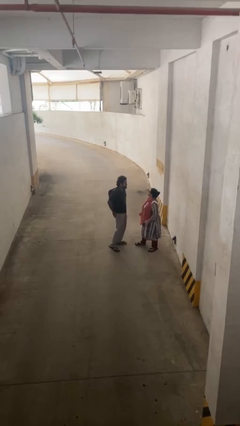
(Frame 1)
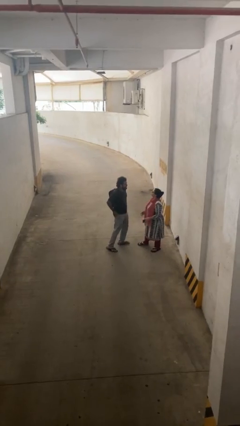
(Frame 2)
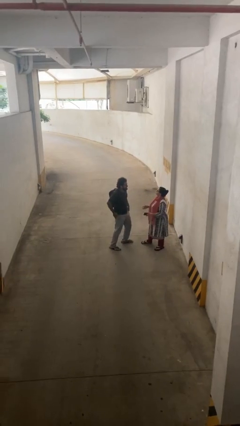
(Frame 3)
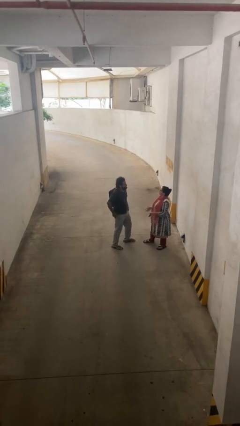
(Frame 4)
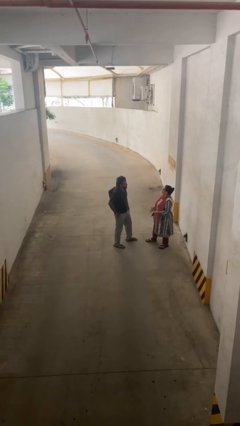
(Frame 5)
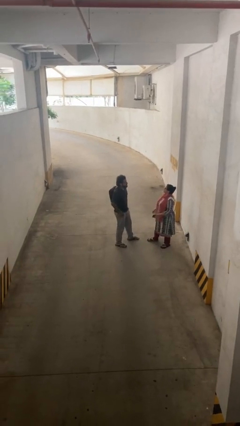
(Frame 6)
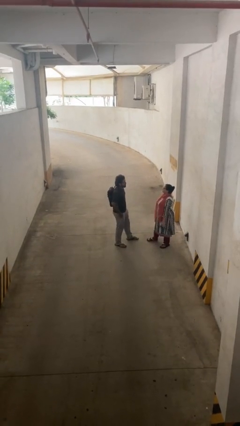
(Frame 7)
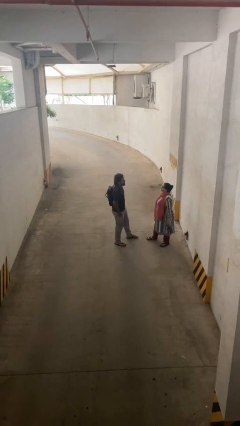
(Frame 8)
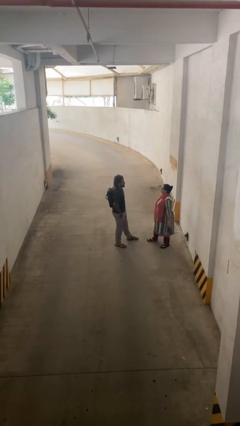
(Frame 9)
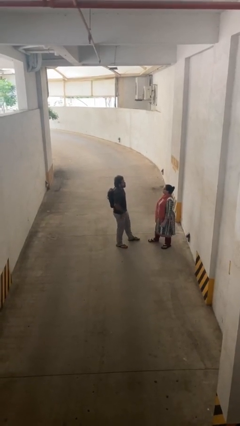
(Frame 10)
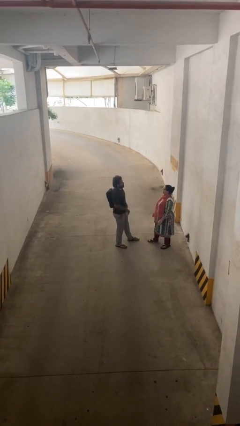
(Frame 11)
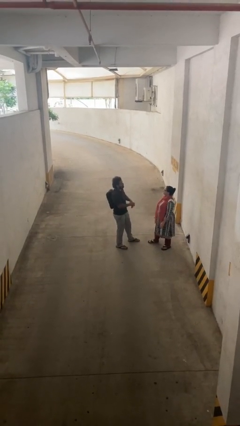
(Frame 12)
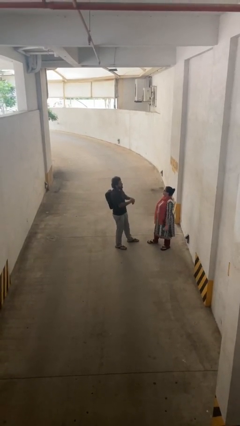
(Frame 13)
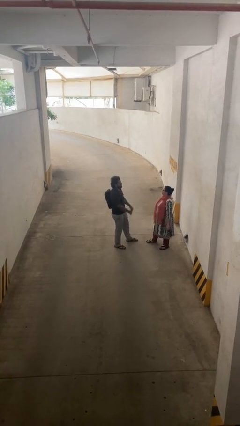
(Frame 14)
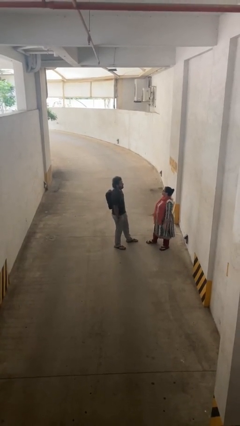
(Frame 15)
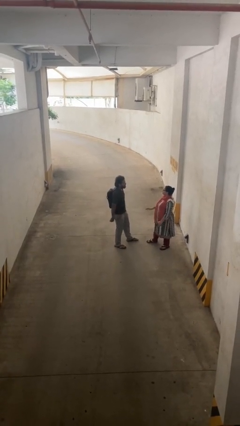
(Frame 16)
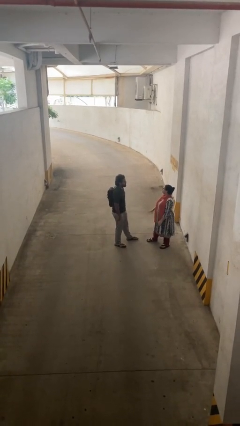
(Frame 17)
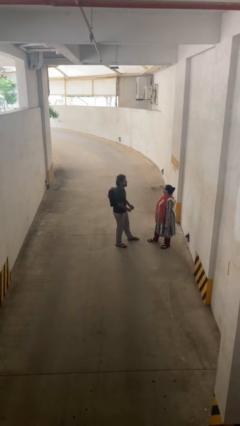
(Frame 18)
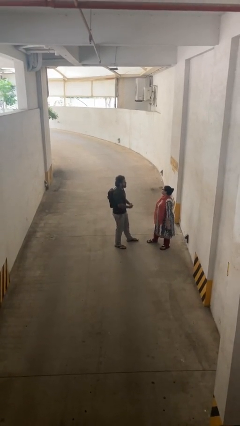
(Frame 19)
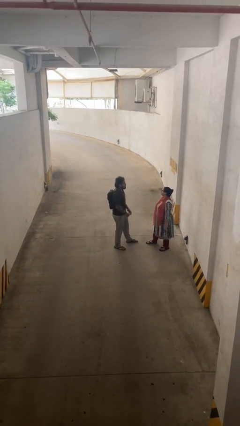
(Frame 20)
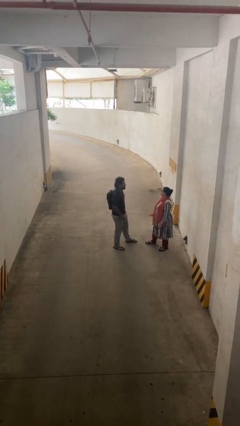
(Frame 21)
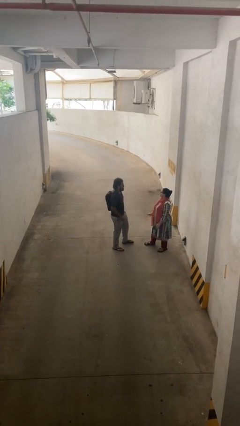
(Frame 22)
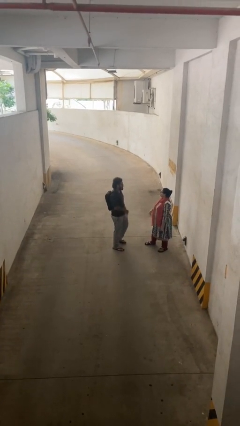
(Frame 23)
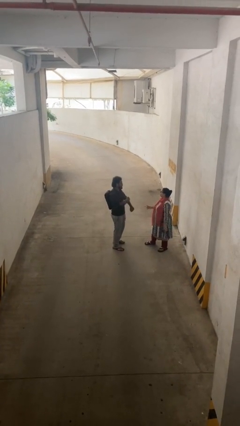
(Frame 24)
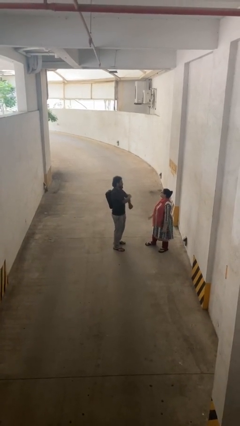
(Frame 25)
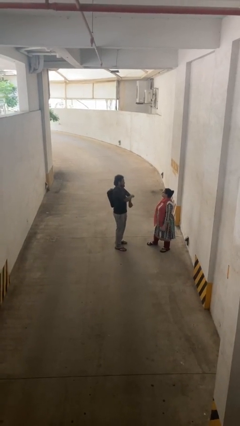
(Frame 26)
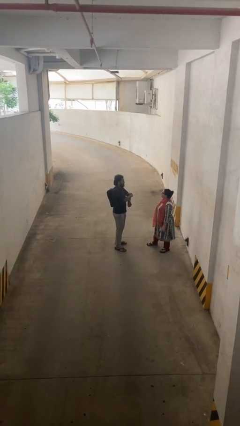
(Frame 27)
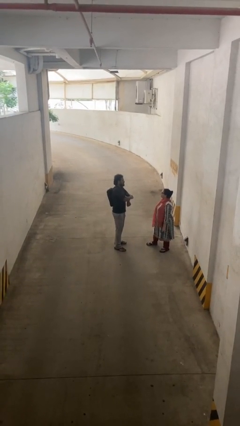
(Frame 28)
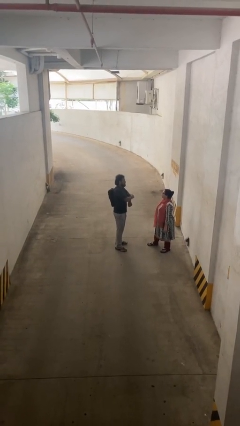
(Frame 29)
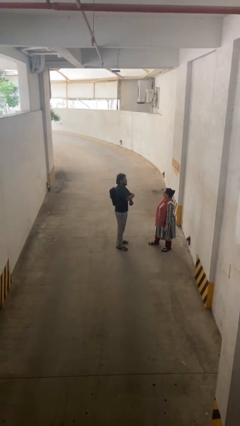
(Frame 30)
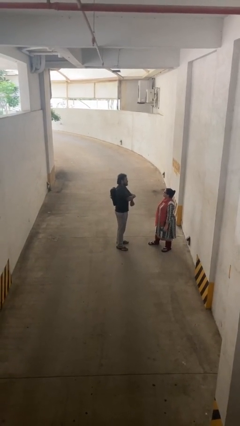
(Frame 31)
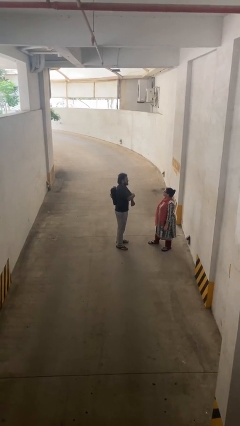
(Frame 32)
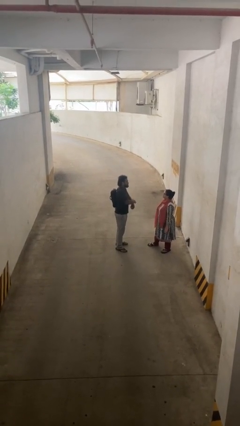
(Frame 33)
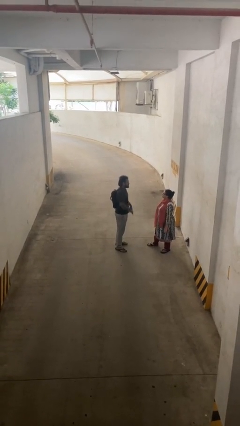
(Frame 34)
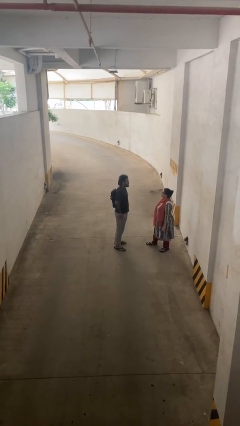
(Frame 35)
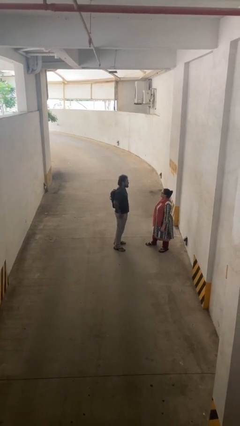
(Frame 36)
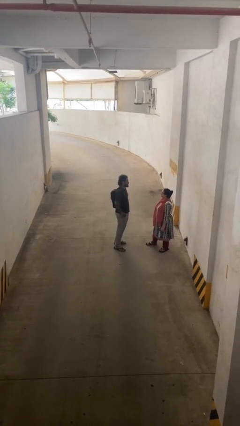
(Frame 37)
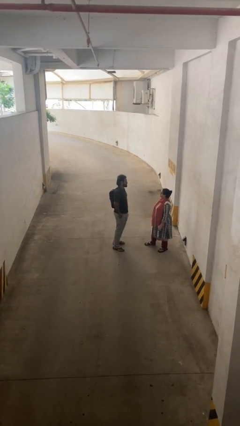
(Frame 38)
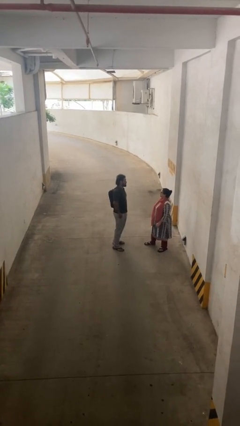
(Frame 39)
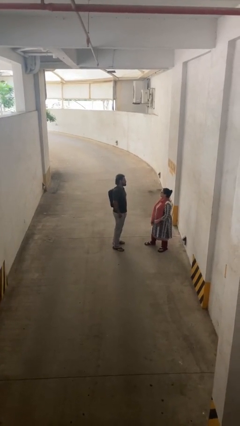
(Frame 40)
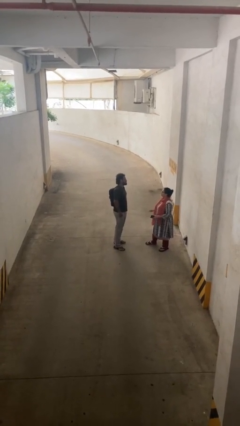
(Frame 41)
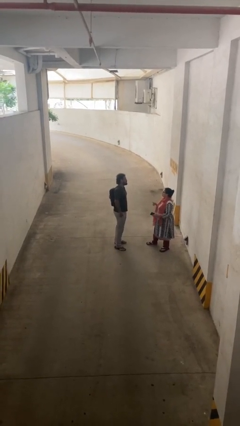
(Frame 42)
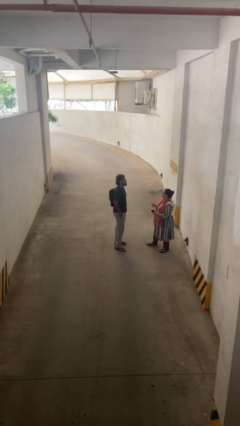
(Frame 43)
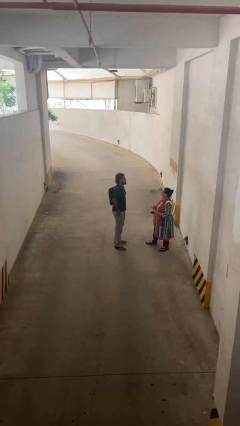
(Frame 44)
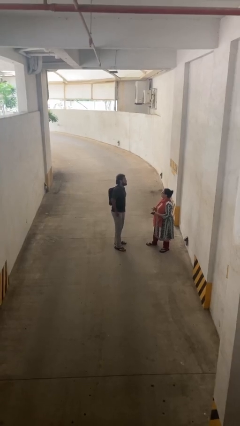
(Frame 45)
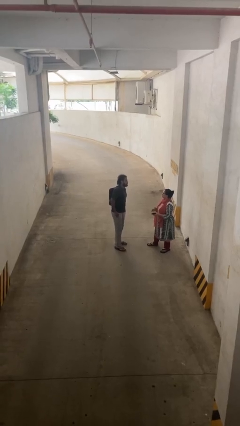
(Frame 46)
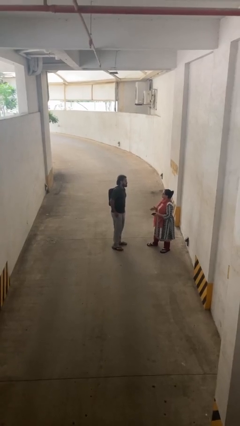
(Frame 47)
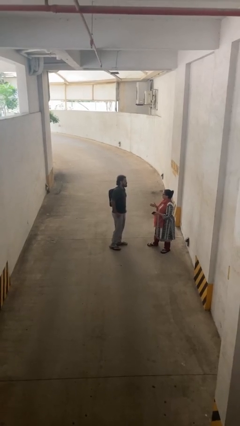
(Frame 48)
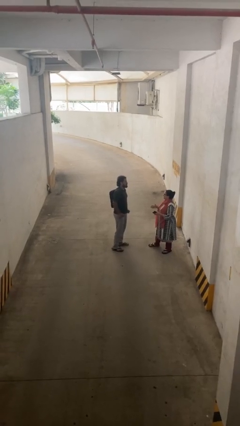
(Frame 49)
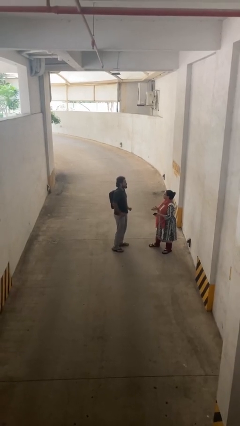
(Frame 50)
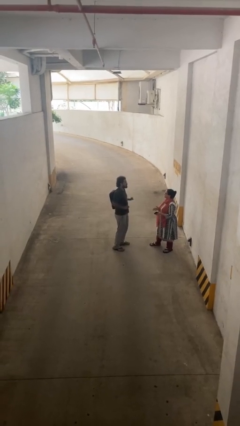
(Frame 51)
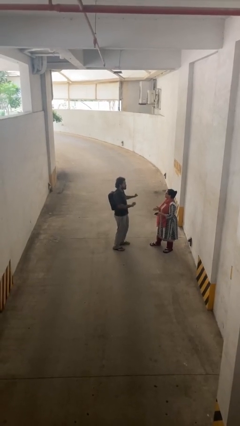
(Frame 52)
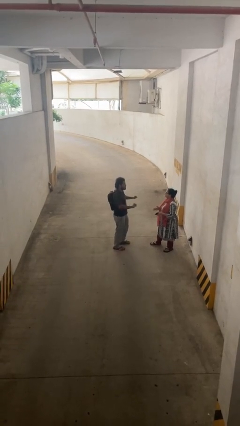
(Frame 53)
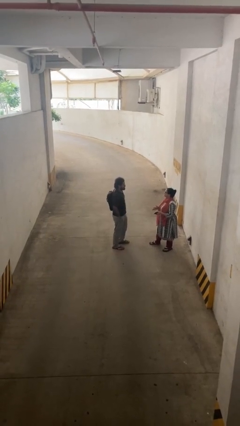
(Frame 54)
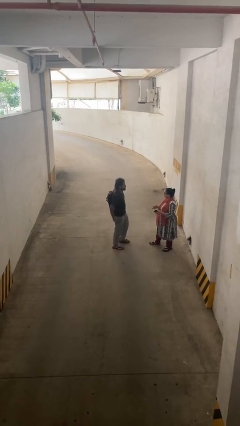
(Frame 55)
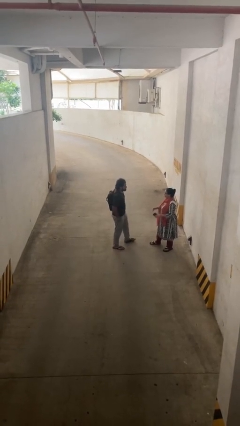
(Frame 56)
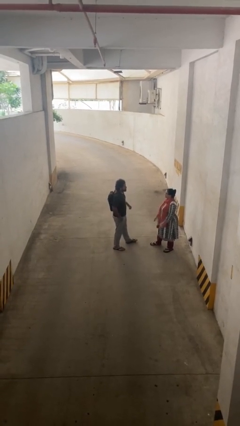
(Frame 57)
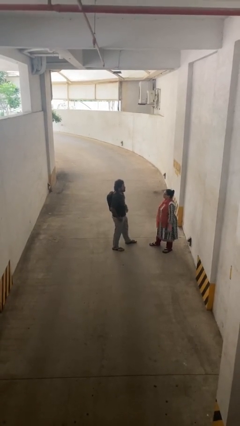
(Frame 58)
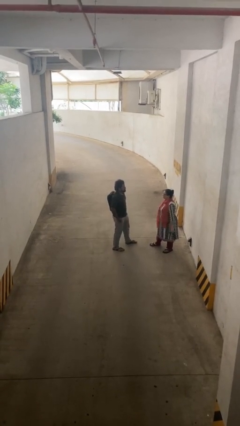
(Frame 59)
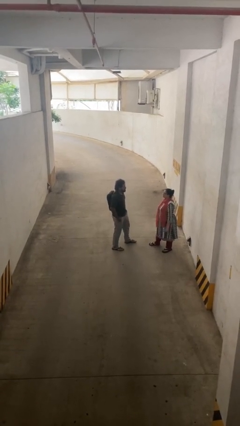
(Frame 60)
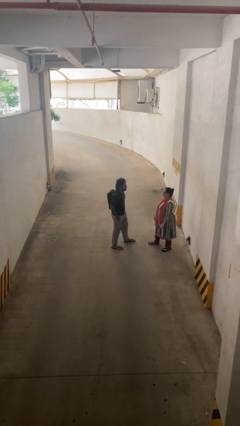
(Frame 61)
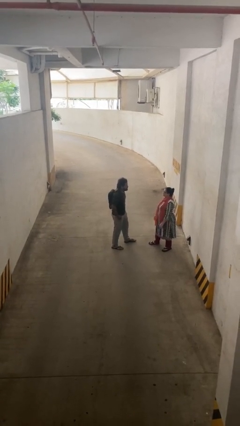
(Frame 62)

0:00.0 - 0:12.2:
person talks to person

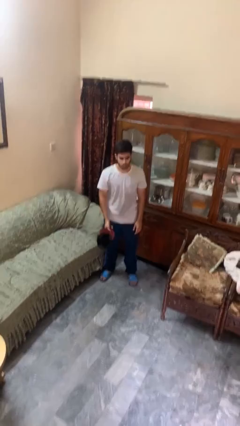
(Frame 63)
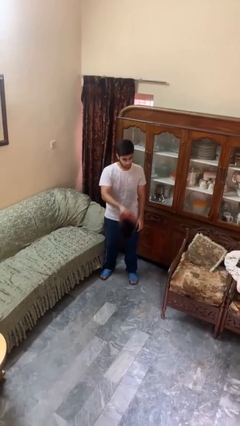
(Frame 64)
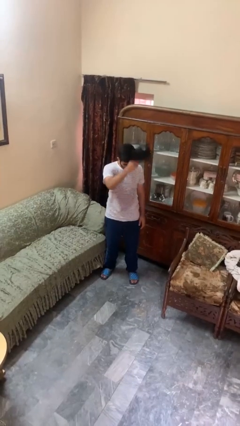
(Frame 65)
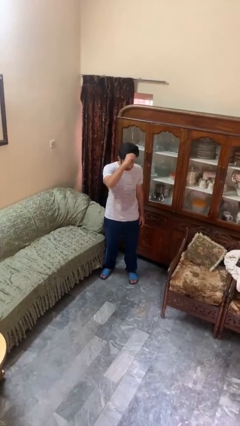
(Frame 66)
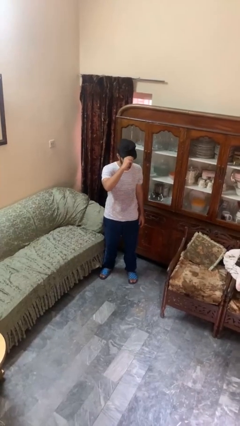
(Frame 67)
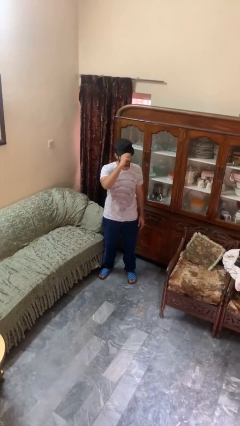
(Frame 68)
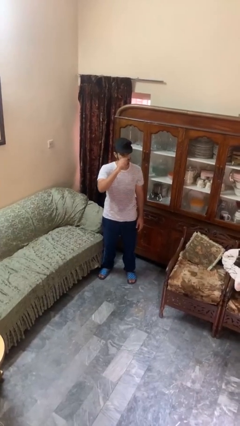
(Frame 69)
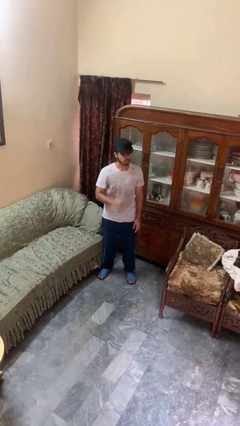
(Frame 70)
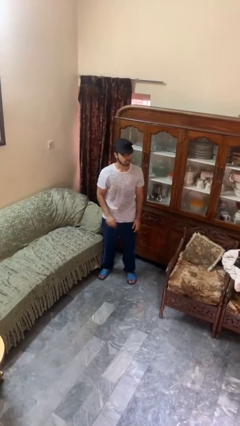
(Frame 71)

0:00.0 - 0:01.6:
person puts on hat

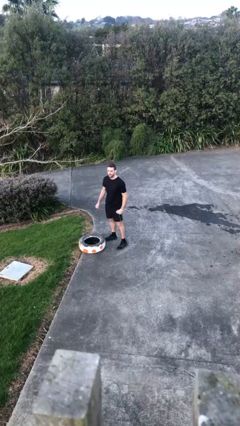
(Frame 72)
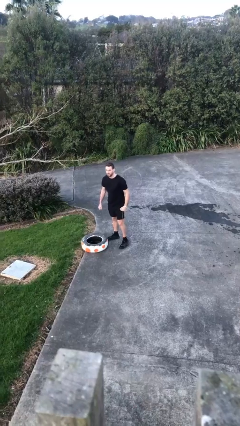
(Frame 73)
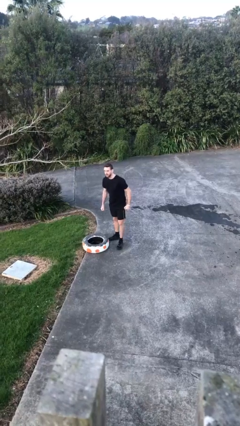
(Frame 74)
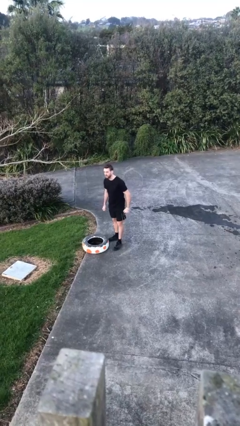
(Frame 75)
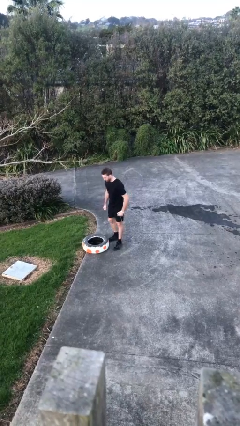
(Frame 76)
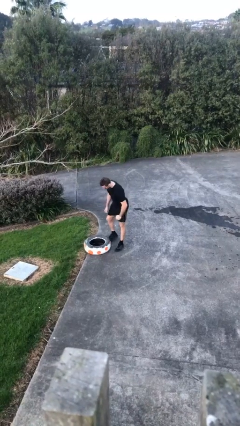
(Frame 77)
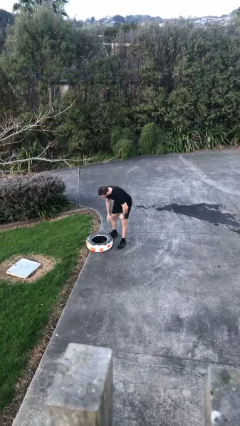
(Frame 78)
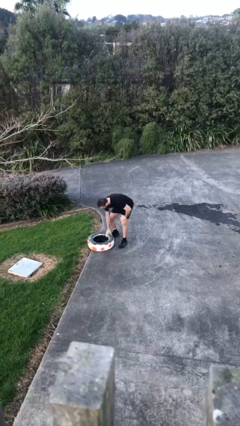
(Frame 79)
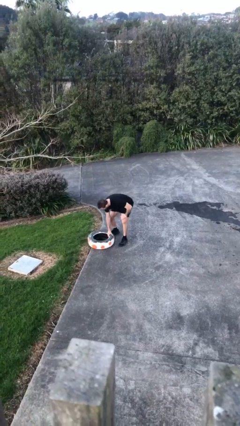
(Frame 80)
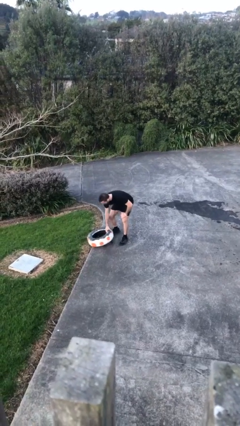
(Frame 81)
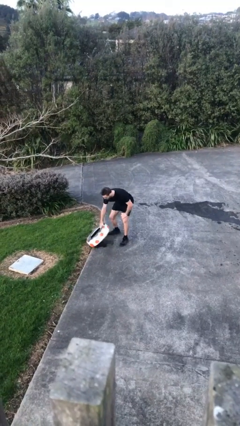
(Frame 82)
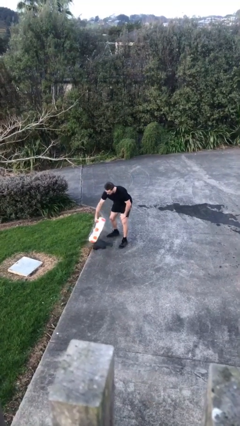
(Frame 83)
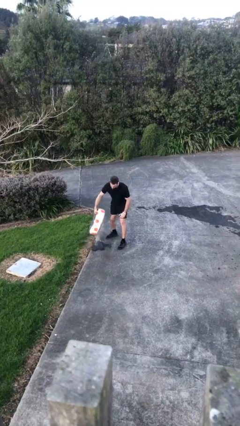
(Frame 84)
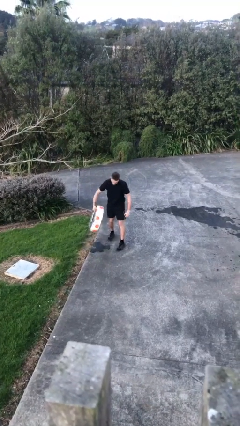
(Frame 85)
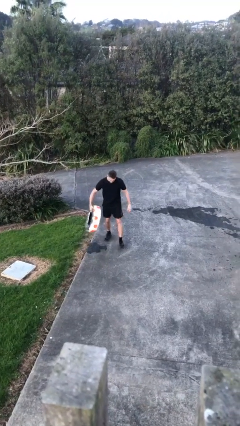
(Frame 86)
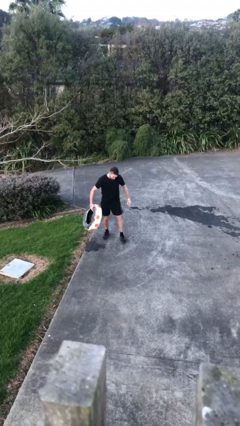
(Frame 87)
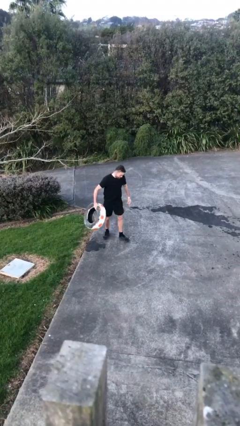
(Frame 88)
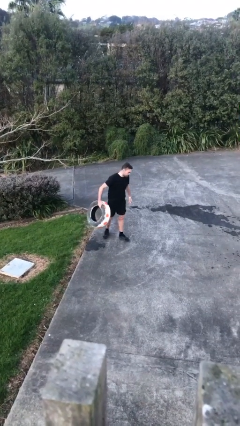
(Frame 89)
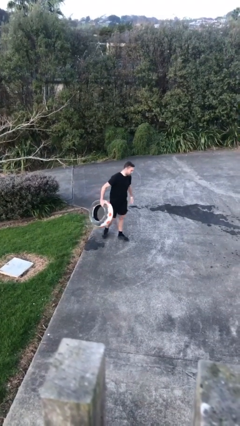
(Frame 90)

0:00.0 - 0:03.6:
person picks up object from floor

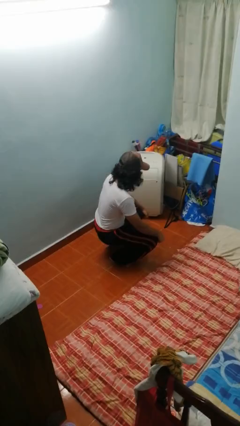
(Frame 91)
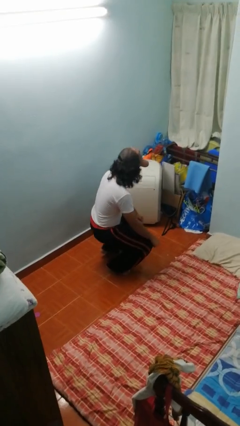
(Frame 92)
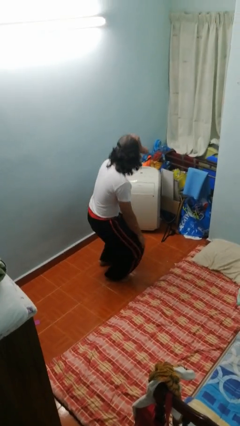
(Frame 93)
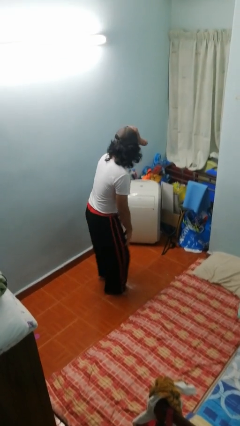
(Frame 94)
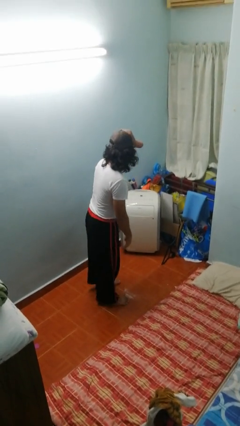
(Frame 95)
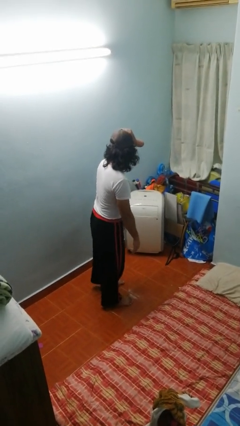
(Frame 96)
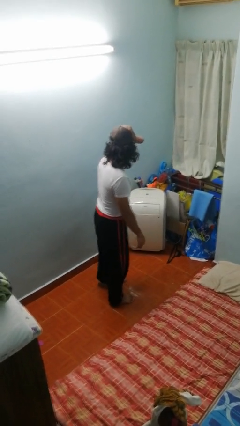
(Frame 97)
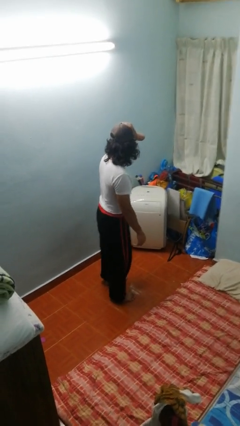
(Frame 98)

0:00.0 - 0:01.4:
person stands up
